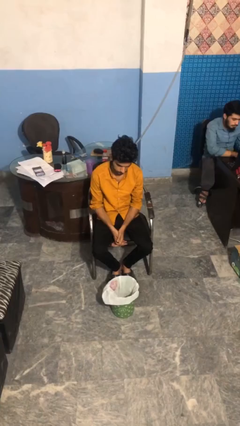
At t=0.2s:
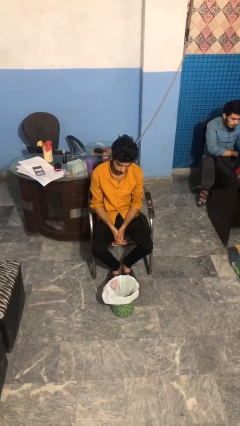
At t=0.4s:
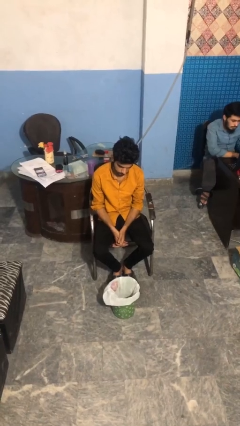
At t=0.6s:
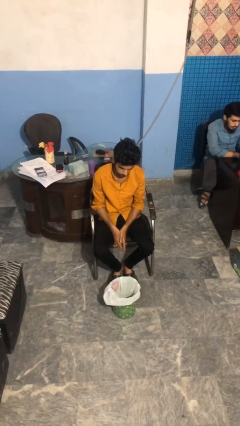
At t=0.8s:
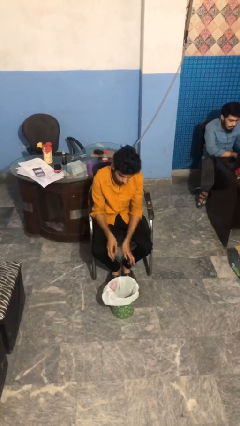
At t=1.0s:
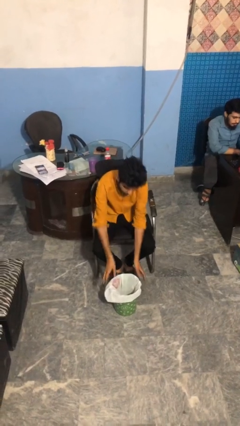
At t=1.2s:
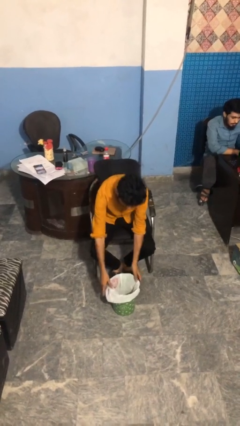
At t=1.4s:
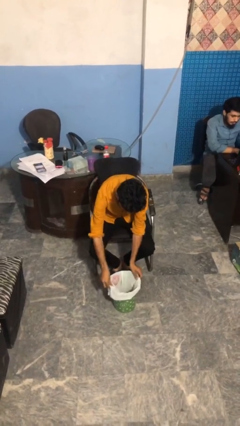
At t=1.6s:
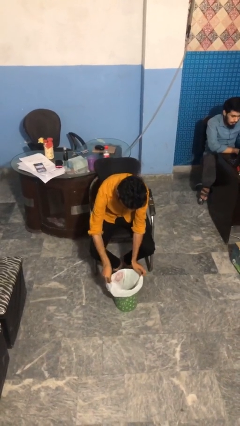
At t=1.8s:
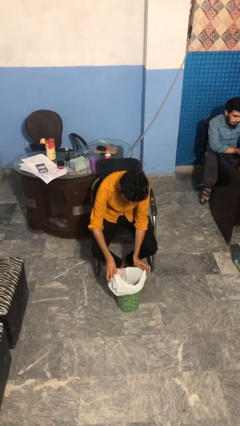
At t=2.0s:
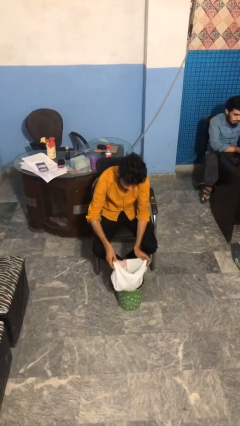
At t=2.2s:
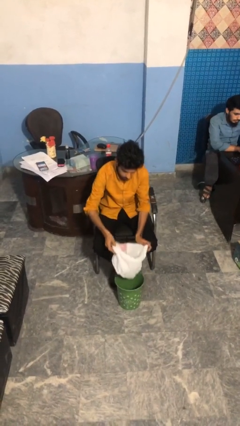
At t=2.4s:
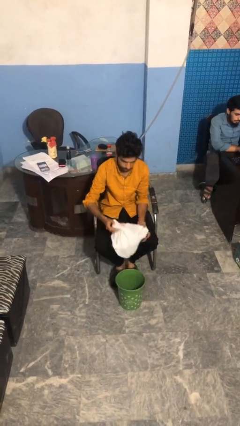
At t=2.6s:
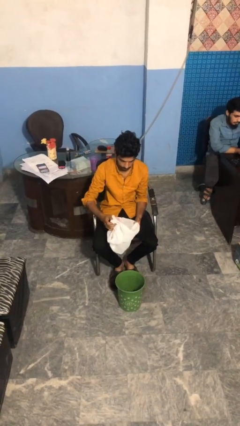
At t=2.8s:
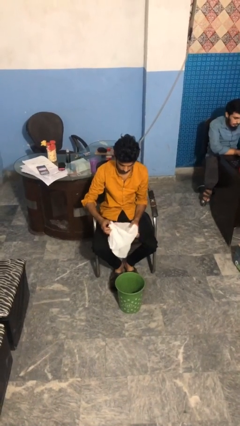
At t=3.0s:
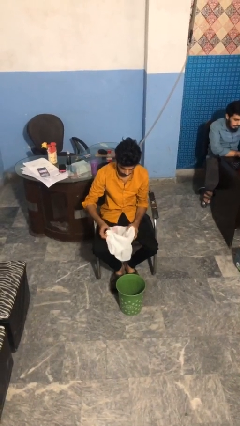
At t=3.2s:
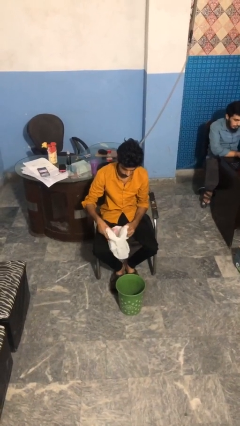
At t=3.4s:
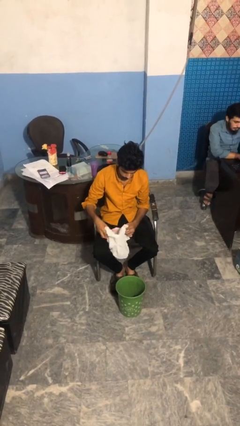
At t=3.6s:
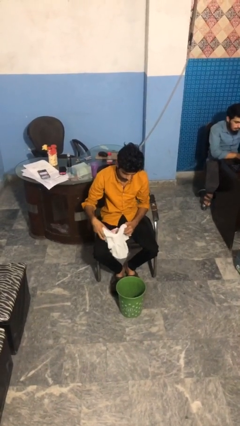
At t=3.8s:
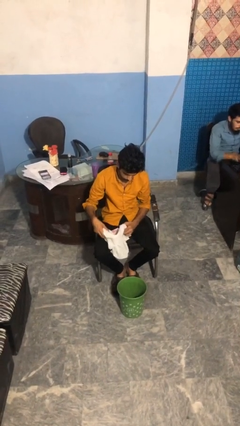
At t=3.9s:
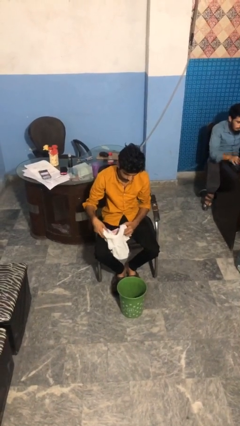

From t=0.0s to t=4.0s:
person removes trashbag from trashcan

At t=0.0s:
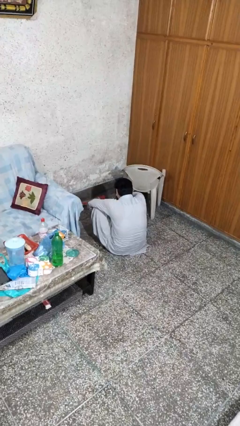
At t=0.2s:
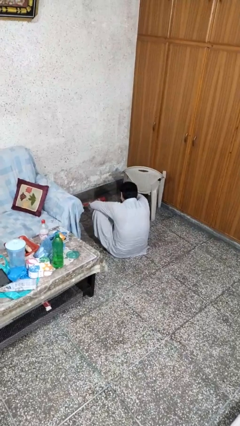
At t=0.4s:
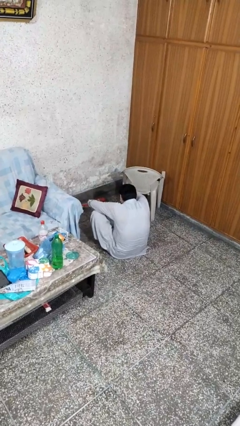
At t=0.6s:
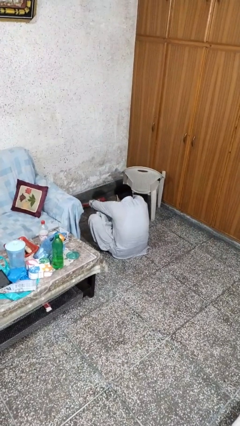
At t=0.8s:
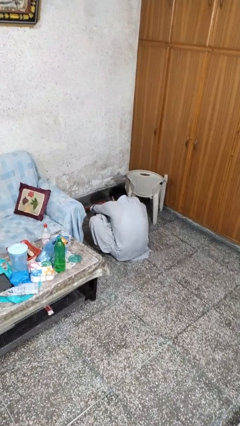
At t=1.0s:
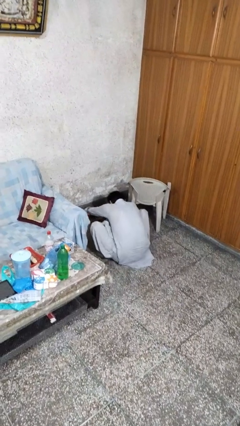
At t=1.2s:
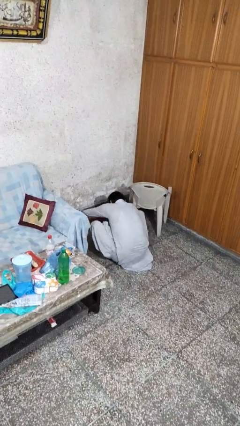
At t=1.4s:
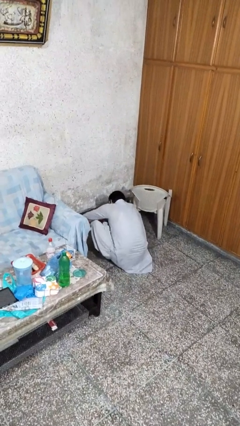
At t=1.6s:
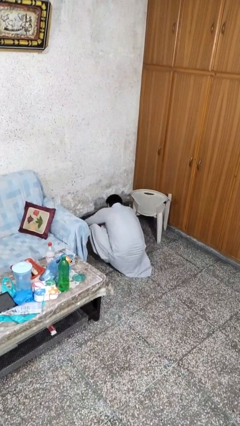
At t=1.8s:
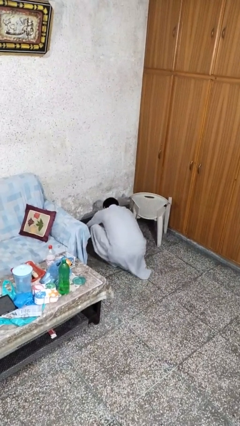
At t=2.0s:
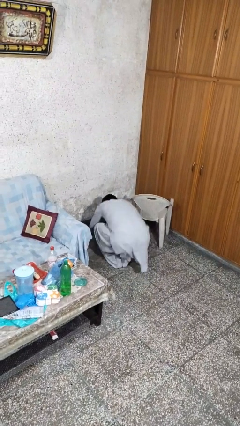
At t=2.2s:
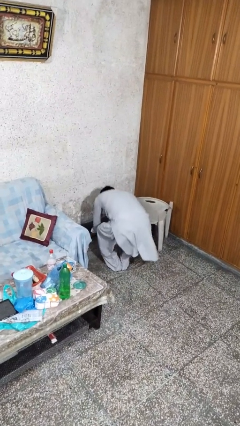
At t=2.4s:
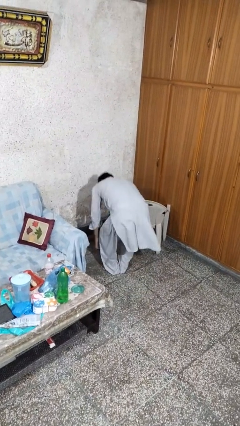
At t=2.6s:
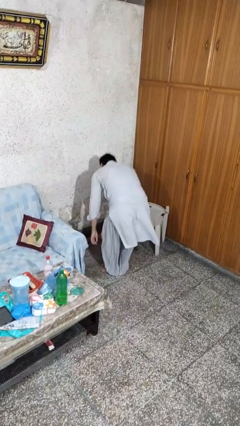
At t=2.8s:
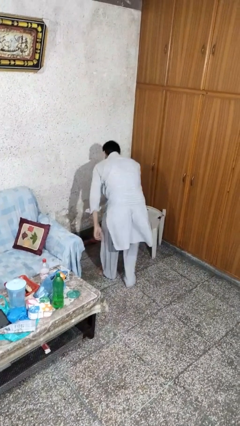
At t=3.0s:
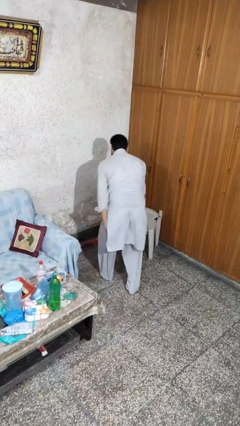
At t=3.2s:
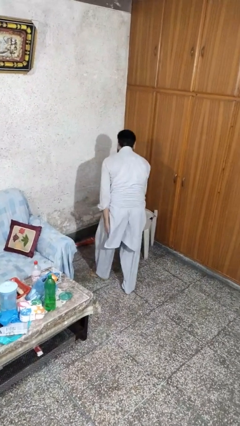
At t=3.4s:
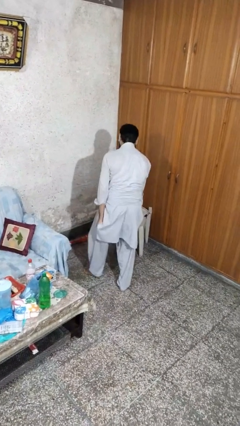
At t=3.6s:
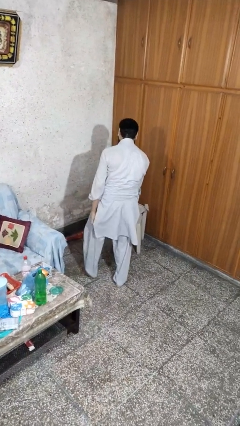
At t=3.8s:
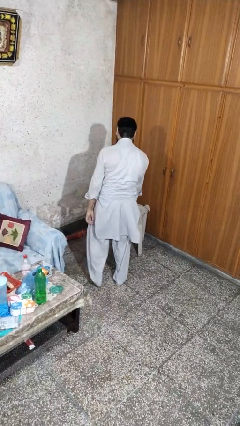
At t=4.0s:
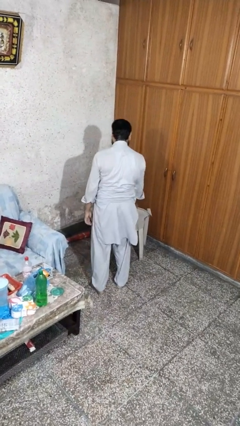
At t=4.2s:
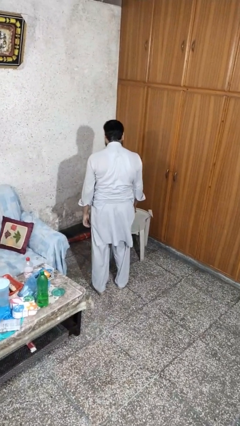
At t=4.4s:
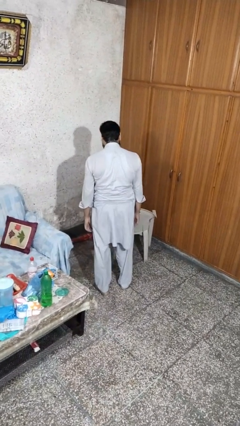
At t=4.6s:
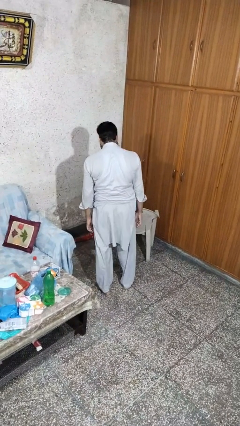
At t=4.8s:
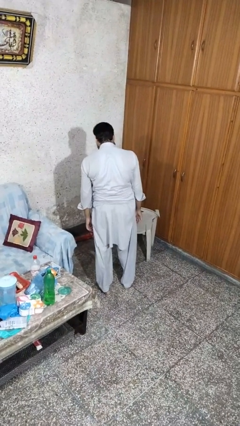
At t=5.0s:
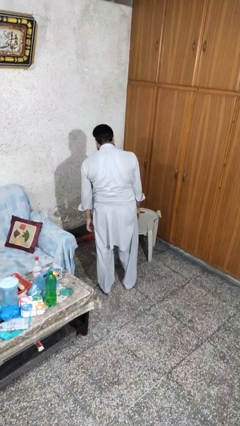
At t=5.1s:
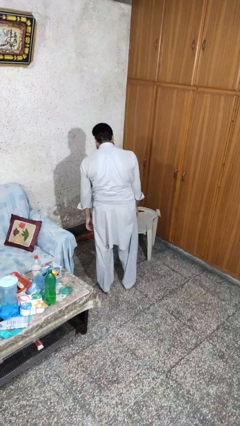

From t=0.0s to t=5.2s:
person stands up from floor

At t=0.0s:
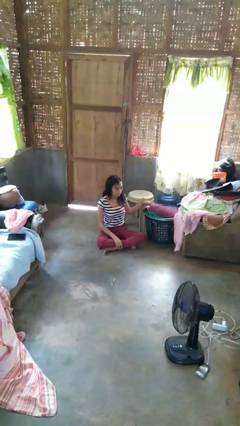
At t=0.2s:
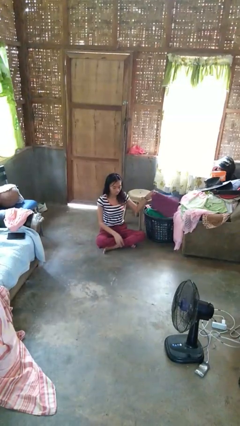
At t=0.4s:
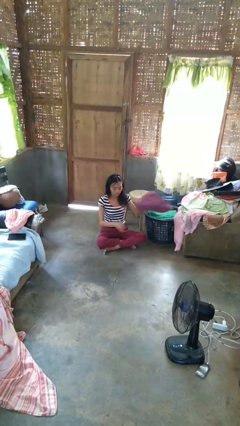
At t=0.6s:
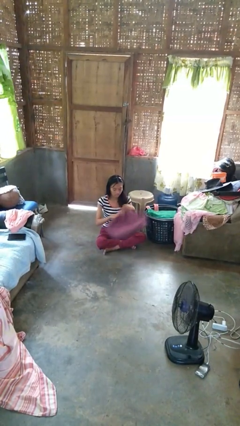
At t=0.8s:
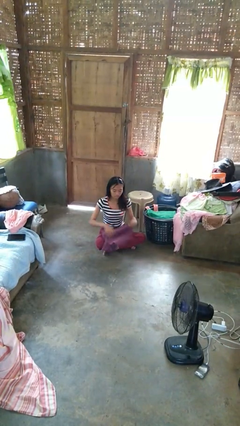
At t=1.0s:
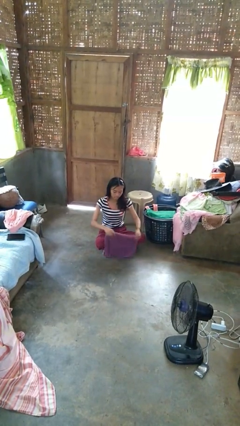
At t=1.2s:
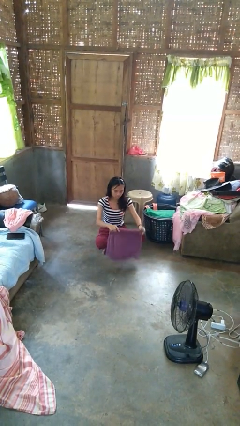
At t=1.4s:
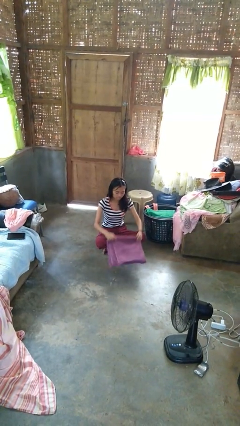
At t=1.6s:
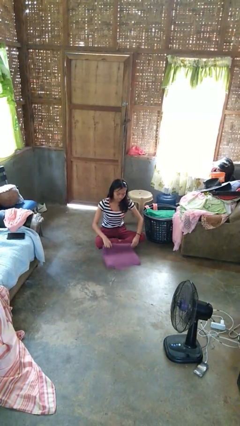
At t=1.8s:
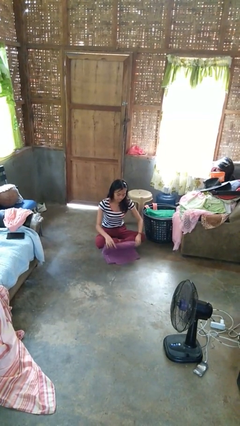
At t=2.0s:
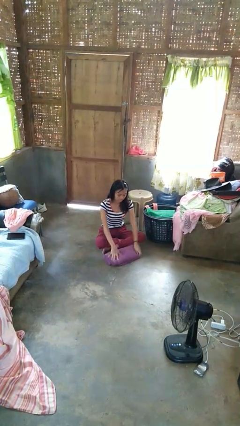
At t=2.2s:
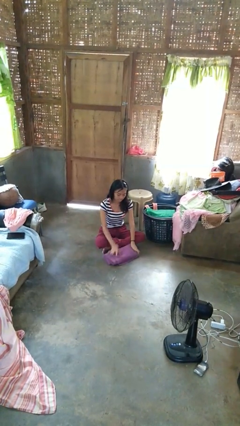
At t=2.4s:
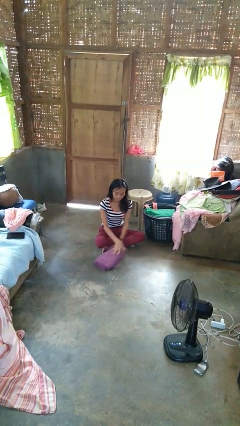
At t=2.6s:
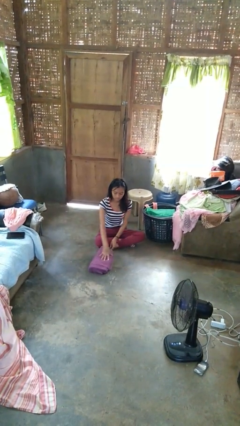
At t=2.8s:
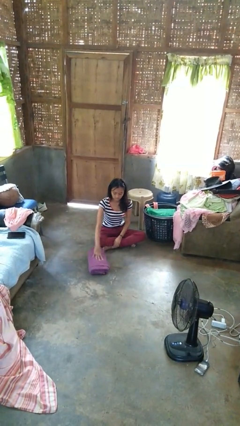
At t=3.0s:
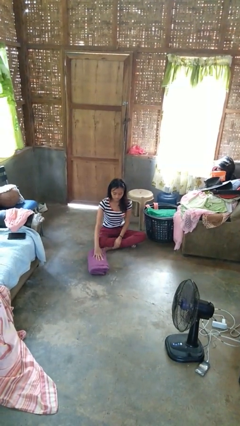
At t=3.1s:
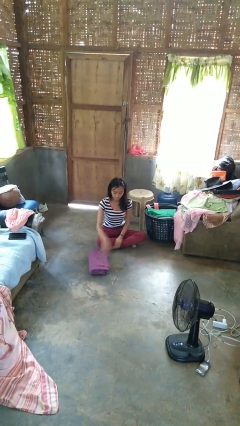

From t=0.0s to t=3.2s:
person folds towel

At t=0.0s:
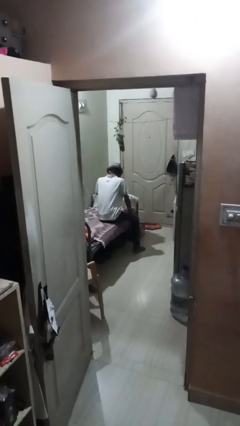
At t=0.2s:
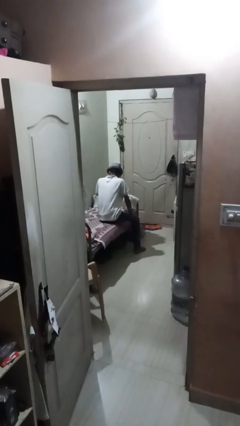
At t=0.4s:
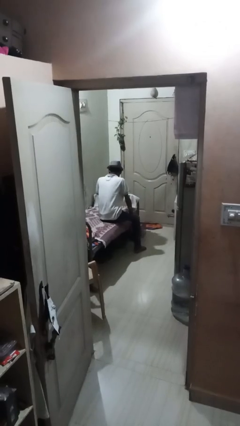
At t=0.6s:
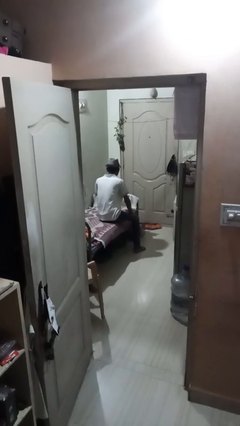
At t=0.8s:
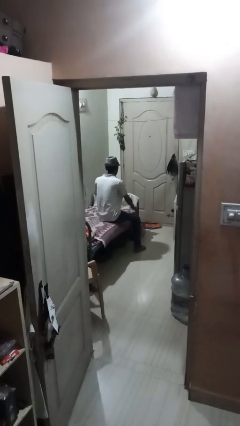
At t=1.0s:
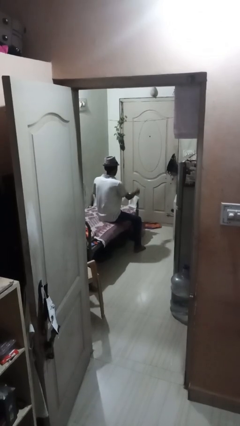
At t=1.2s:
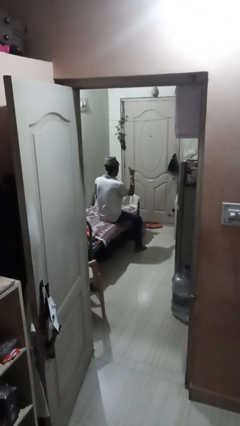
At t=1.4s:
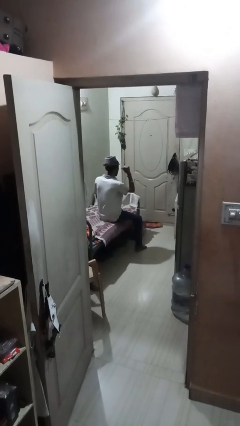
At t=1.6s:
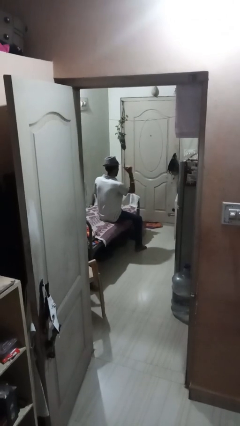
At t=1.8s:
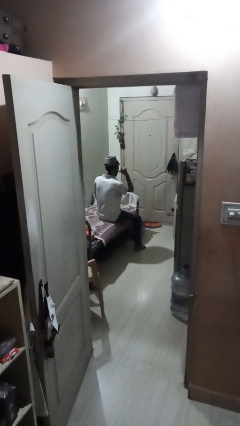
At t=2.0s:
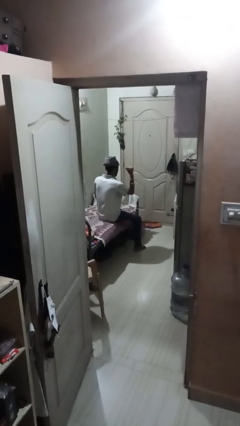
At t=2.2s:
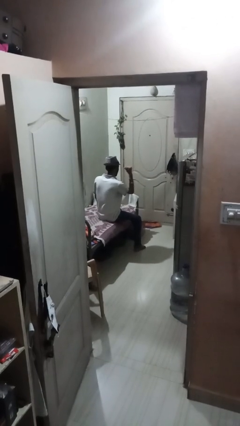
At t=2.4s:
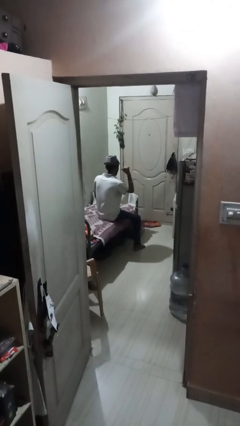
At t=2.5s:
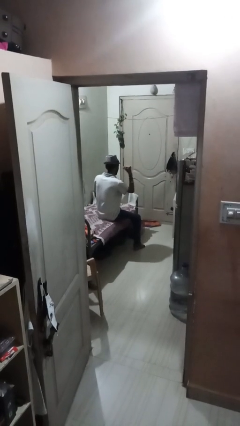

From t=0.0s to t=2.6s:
person gestures behind me

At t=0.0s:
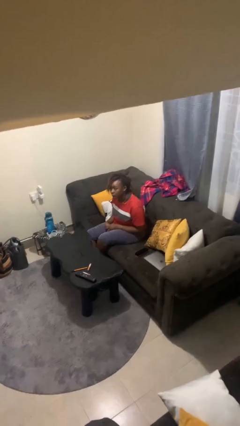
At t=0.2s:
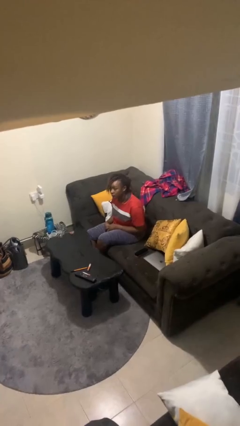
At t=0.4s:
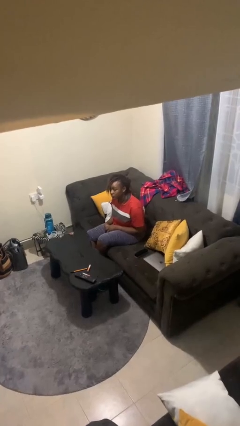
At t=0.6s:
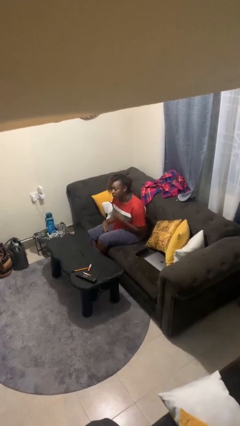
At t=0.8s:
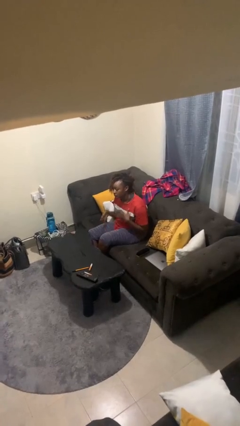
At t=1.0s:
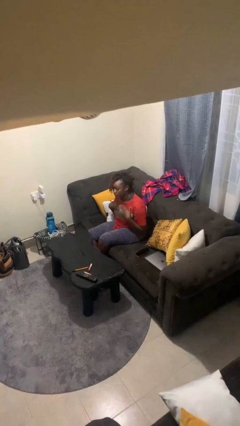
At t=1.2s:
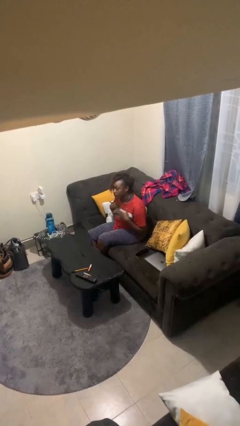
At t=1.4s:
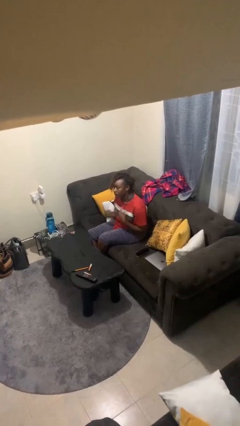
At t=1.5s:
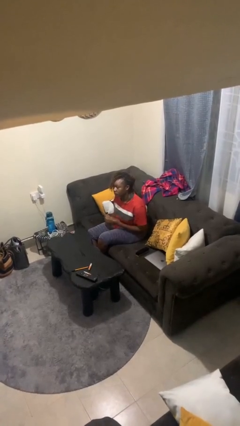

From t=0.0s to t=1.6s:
person drums on chest

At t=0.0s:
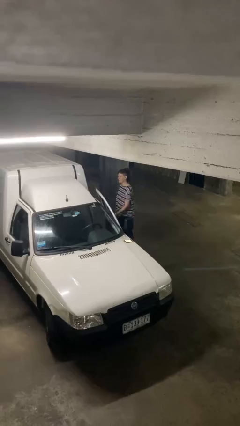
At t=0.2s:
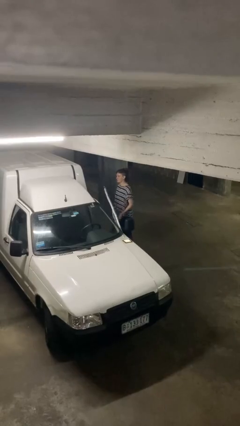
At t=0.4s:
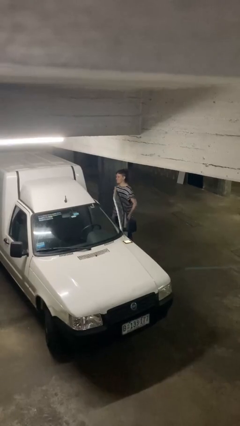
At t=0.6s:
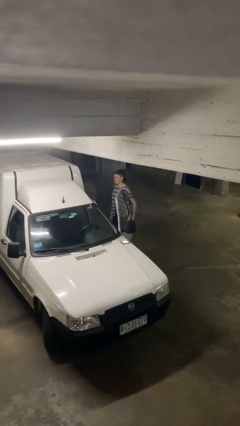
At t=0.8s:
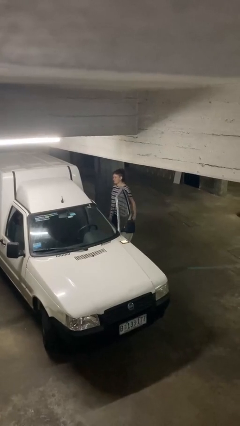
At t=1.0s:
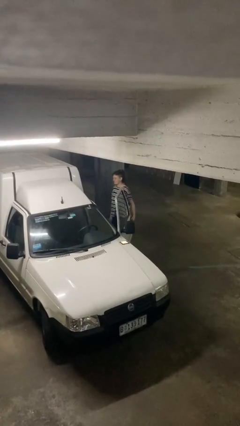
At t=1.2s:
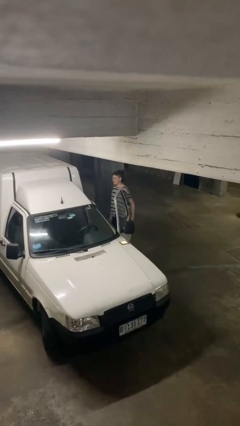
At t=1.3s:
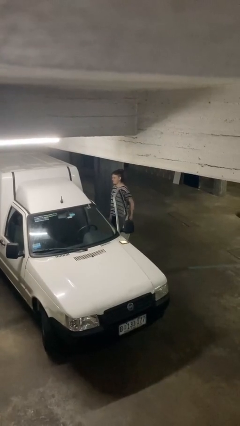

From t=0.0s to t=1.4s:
person opens car door
